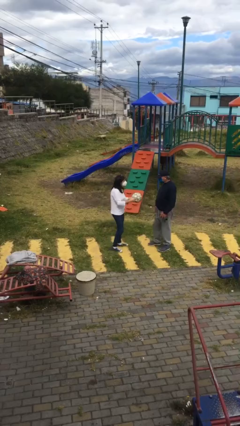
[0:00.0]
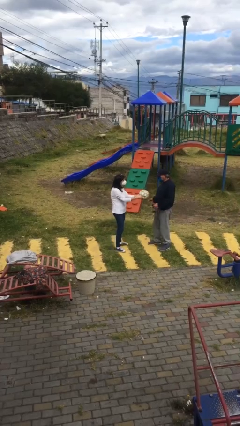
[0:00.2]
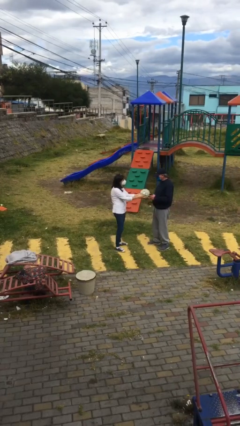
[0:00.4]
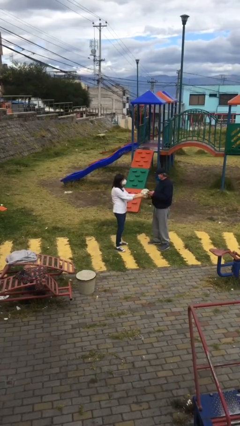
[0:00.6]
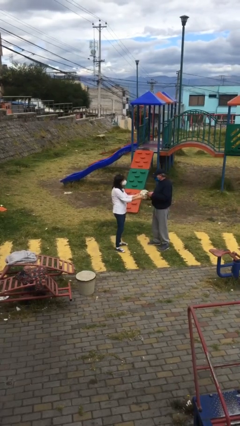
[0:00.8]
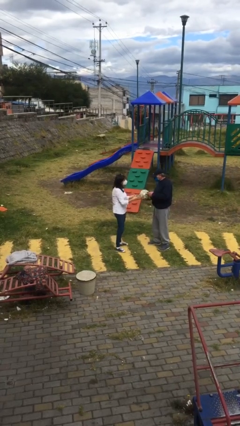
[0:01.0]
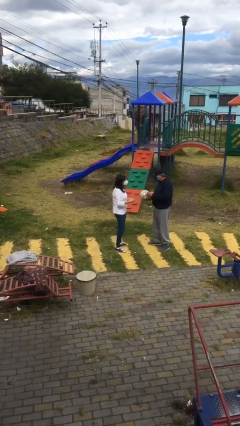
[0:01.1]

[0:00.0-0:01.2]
person transfers object to person

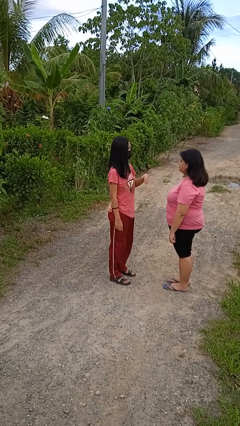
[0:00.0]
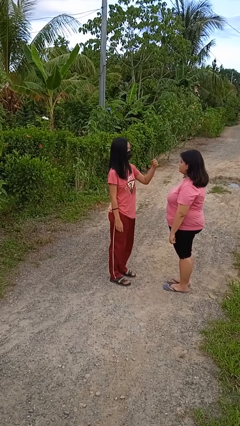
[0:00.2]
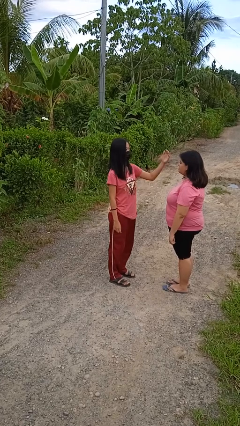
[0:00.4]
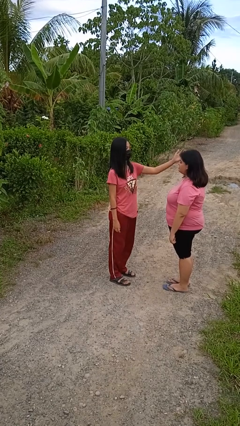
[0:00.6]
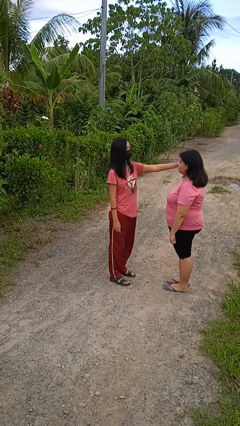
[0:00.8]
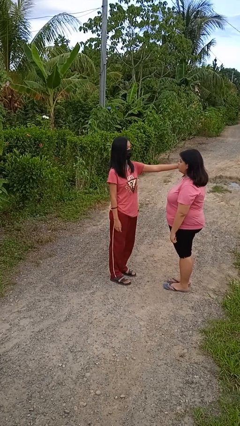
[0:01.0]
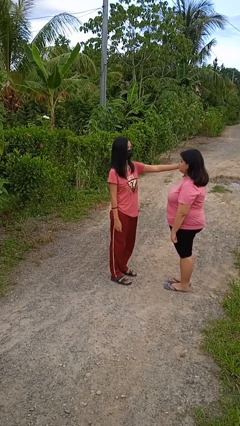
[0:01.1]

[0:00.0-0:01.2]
person touches face of person

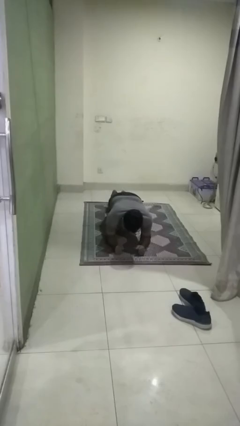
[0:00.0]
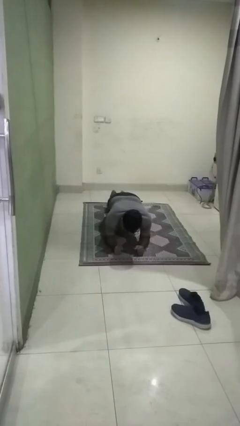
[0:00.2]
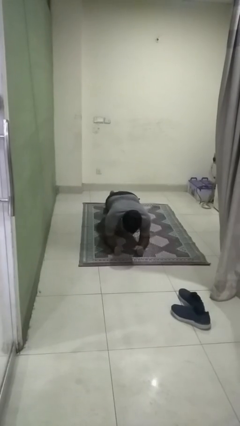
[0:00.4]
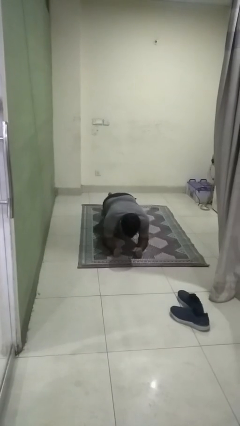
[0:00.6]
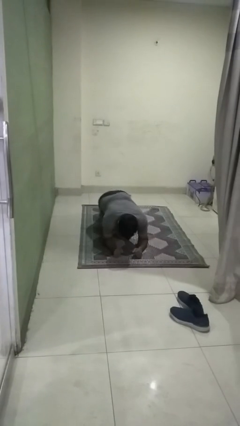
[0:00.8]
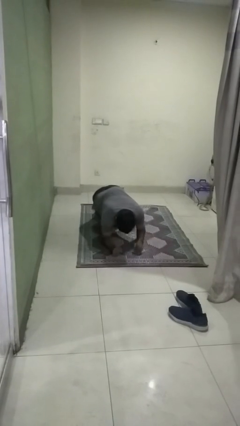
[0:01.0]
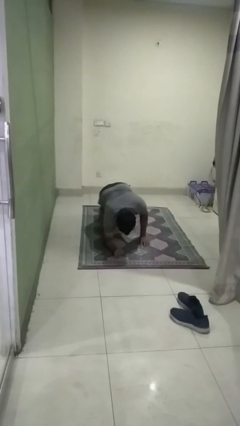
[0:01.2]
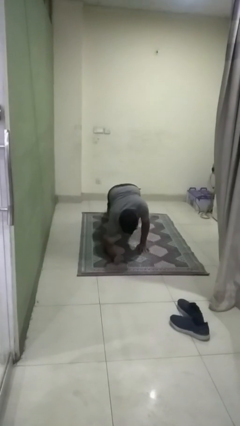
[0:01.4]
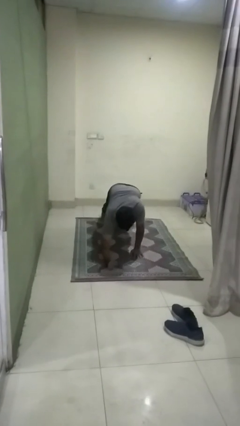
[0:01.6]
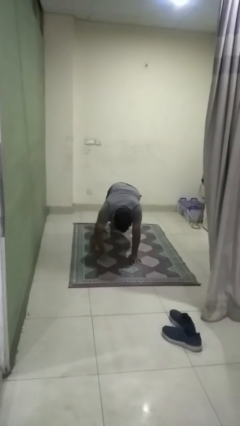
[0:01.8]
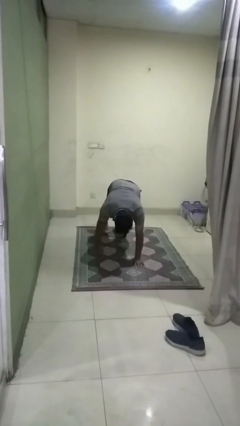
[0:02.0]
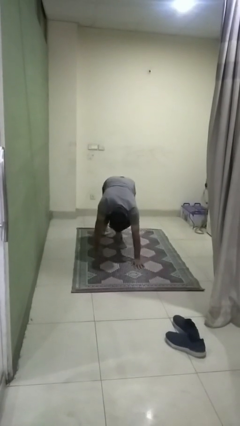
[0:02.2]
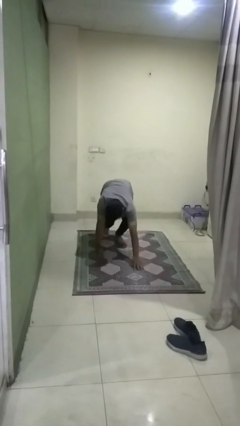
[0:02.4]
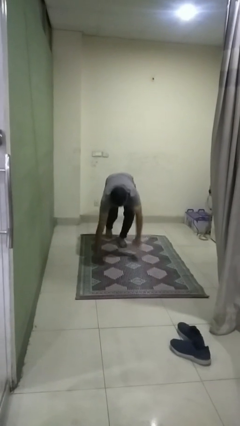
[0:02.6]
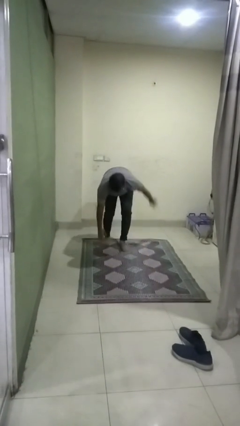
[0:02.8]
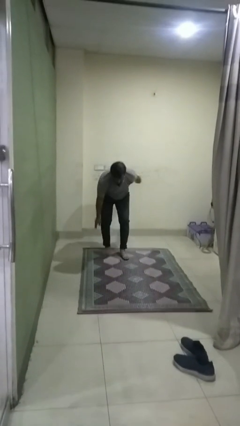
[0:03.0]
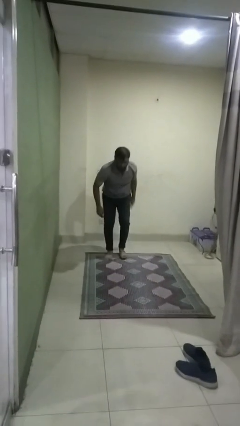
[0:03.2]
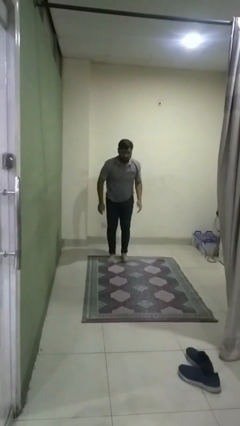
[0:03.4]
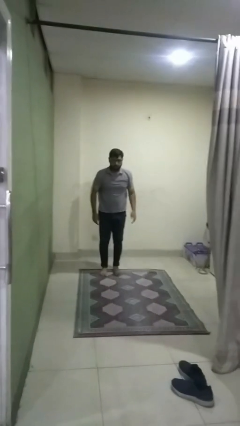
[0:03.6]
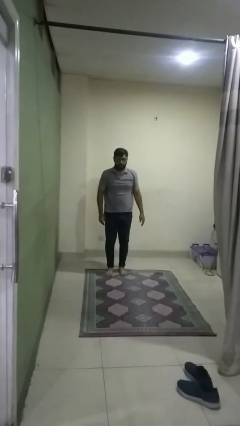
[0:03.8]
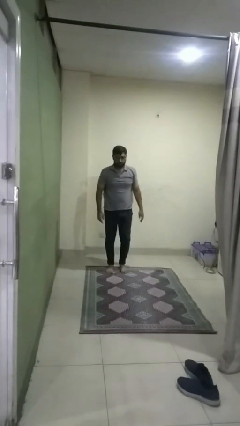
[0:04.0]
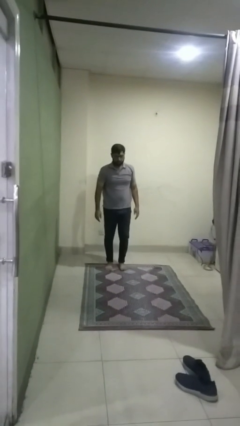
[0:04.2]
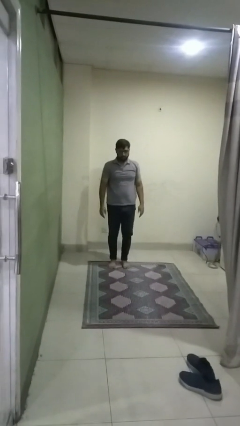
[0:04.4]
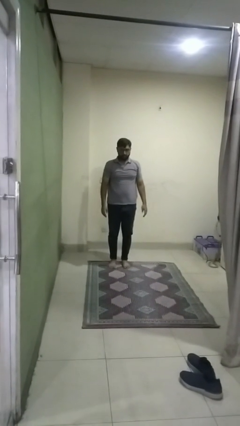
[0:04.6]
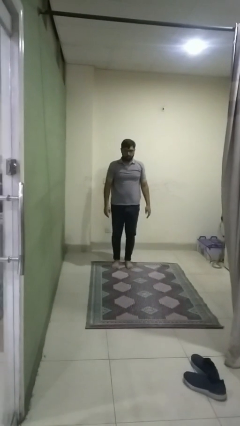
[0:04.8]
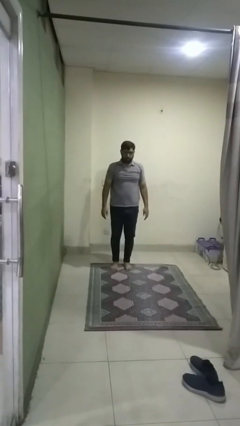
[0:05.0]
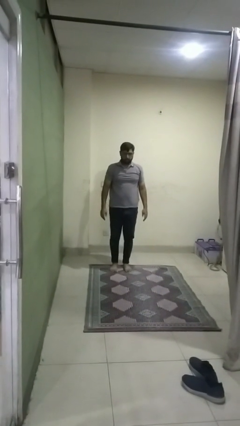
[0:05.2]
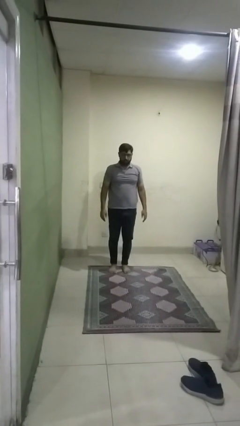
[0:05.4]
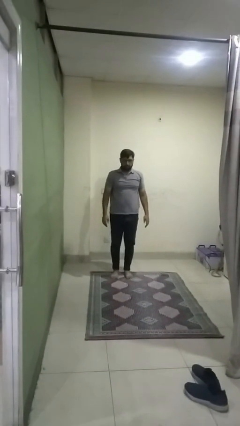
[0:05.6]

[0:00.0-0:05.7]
person stands up from floor

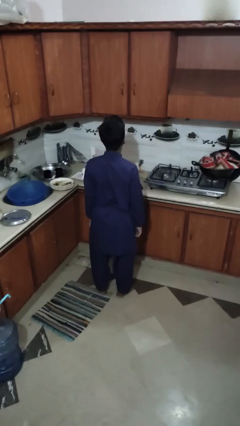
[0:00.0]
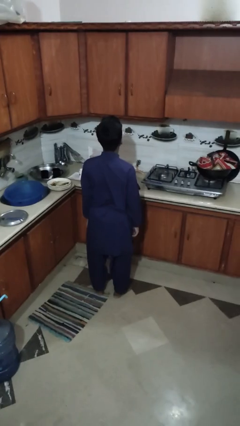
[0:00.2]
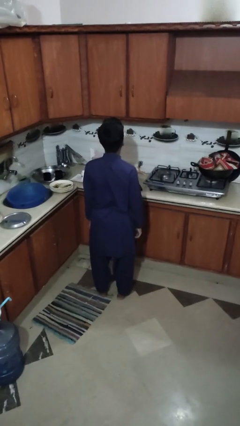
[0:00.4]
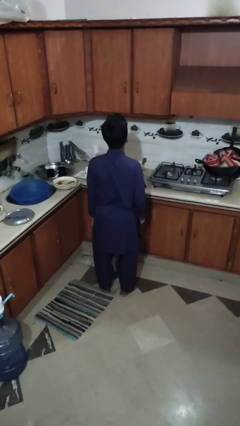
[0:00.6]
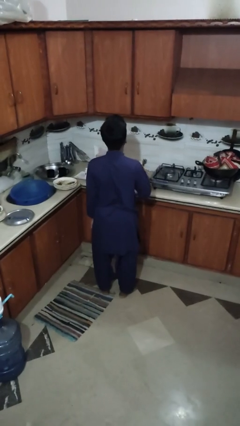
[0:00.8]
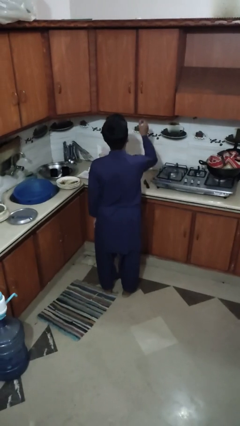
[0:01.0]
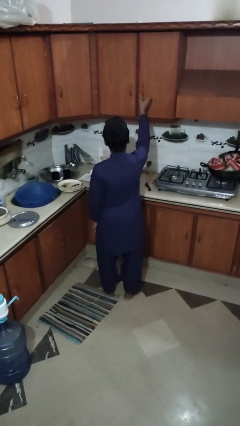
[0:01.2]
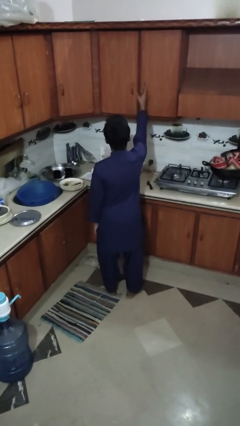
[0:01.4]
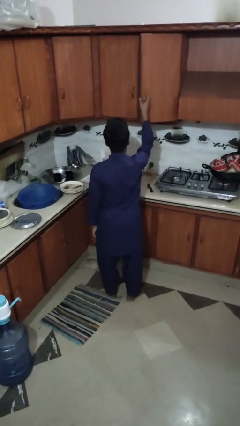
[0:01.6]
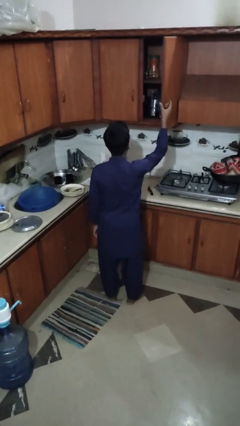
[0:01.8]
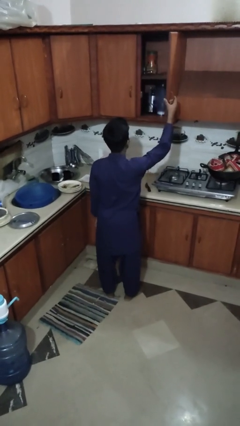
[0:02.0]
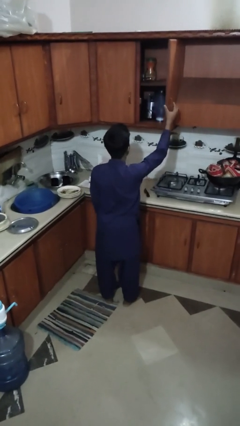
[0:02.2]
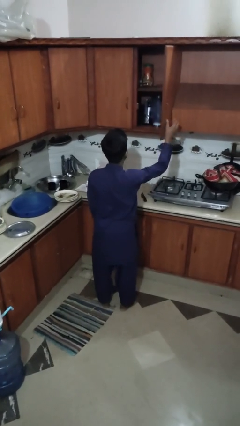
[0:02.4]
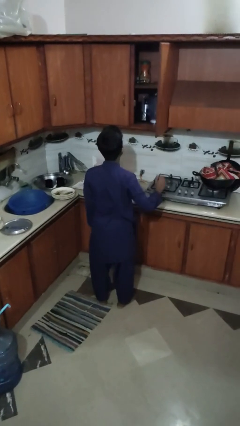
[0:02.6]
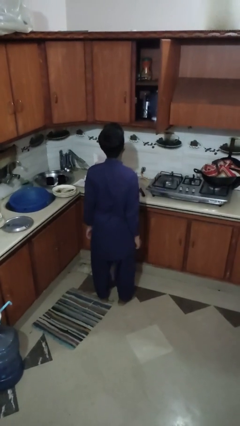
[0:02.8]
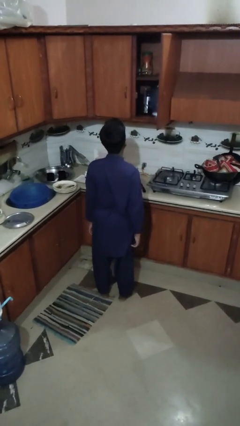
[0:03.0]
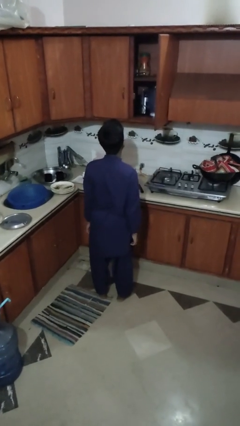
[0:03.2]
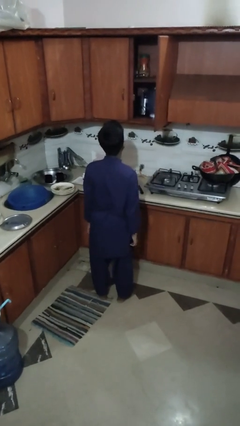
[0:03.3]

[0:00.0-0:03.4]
person opens cabinet

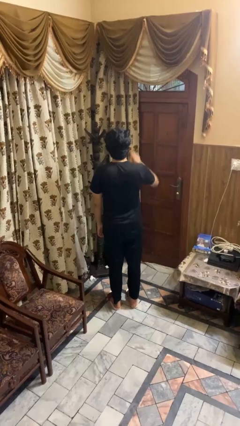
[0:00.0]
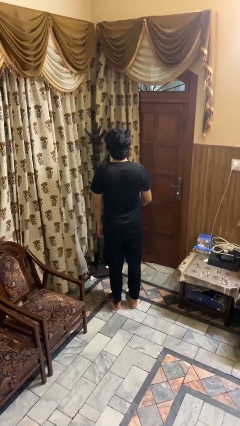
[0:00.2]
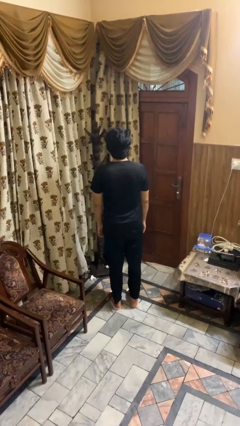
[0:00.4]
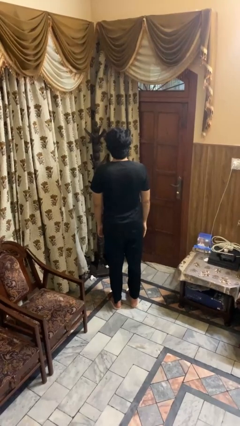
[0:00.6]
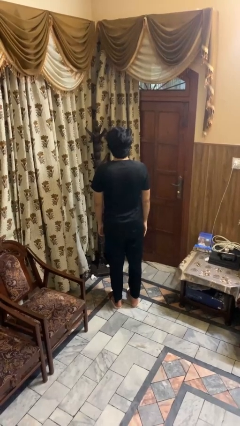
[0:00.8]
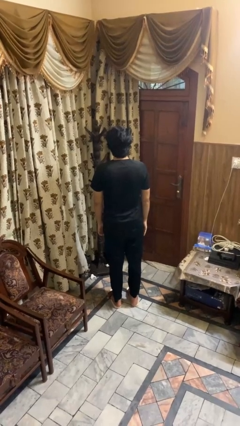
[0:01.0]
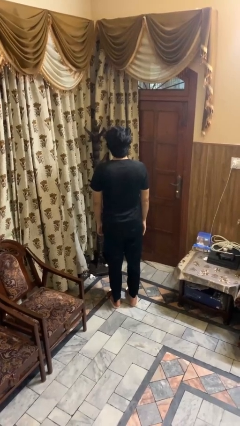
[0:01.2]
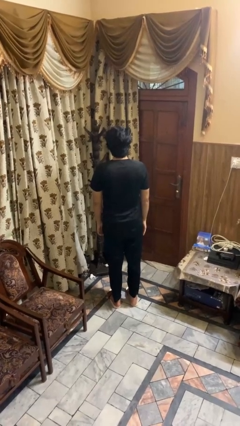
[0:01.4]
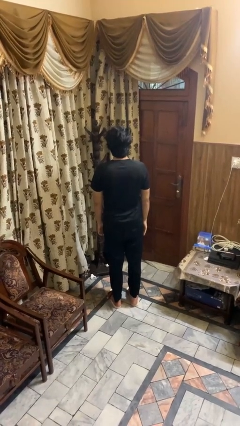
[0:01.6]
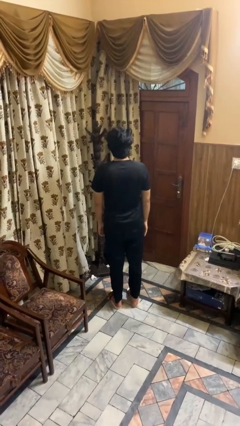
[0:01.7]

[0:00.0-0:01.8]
person gestures lower hand

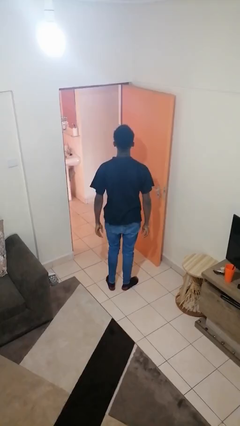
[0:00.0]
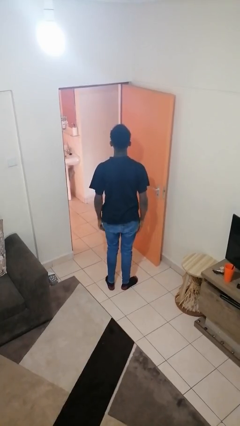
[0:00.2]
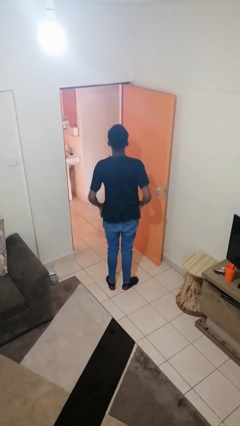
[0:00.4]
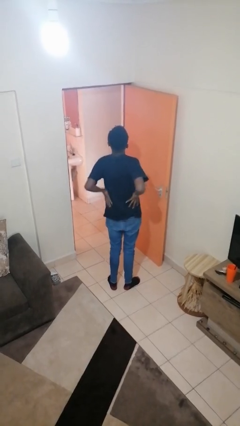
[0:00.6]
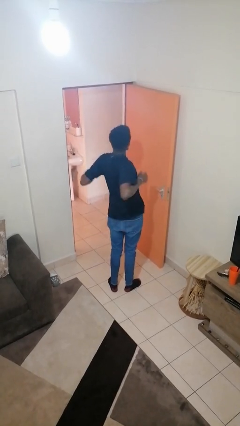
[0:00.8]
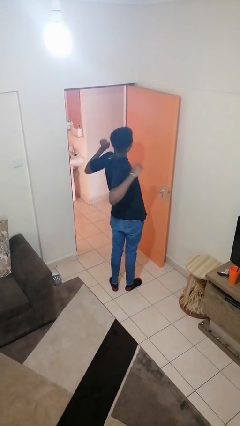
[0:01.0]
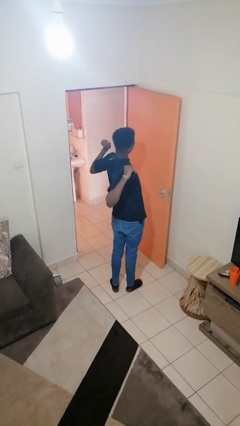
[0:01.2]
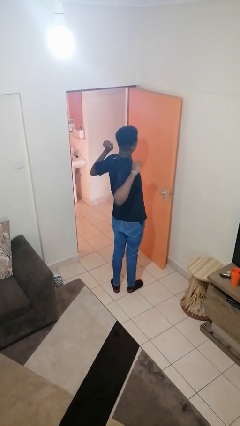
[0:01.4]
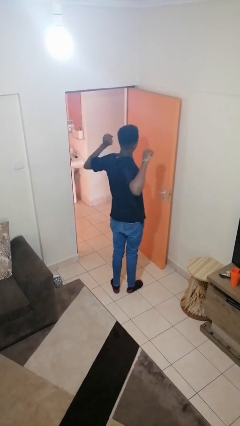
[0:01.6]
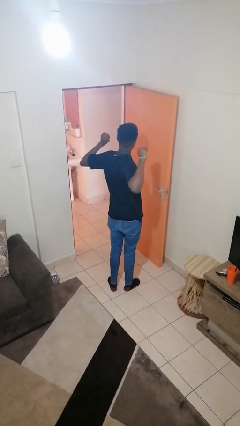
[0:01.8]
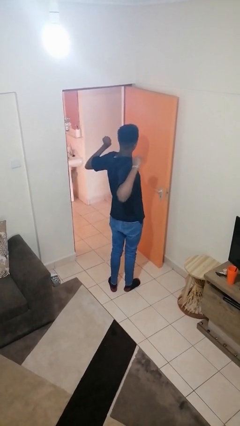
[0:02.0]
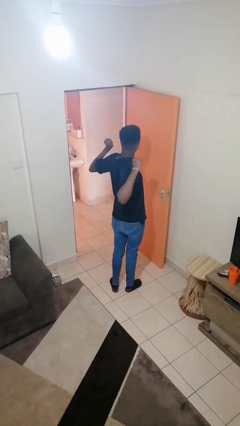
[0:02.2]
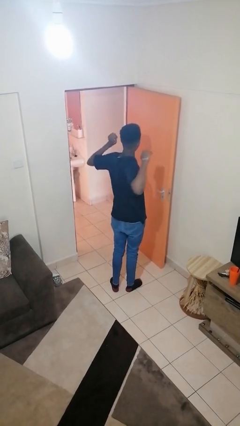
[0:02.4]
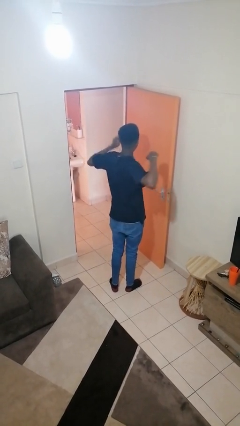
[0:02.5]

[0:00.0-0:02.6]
person stretches arms to side

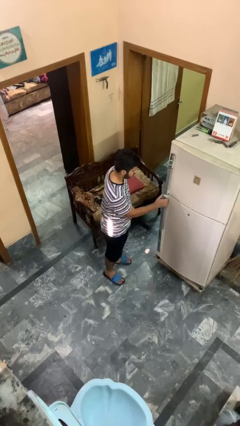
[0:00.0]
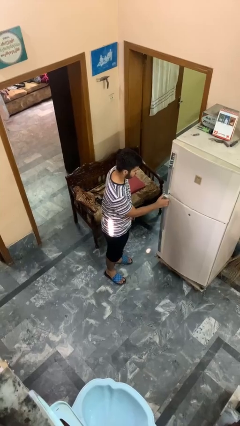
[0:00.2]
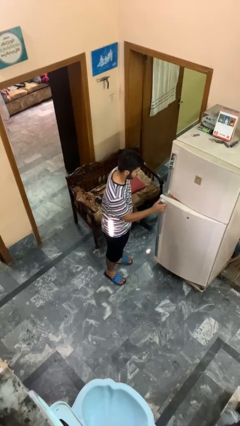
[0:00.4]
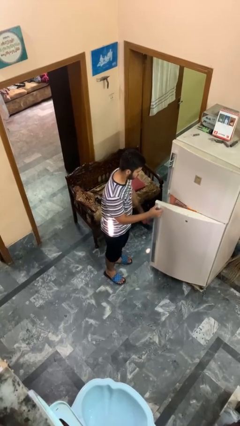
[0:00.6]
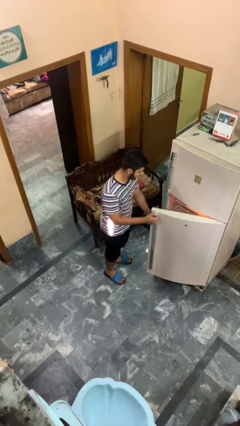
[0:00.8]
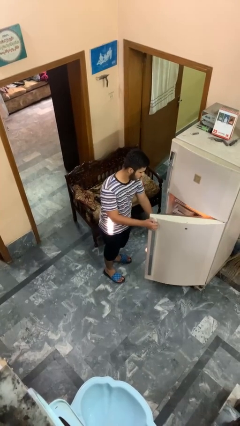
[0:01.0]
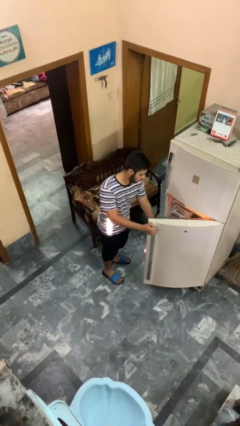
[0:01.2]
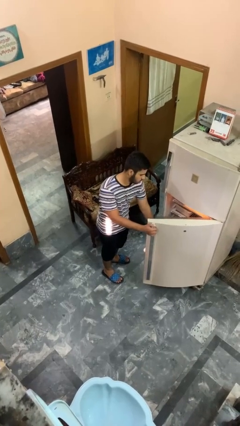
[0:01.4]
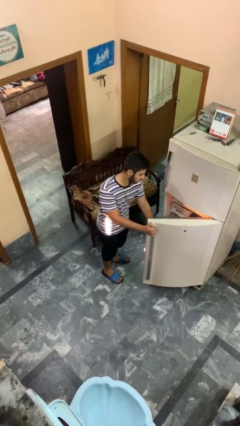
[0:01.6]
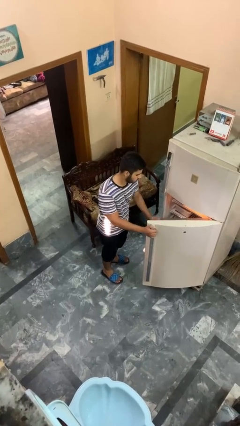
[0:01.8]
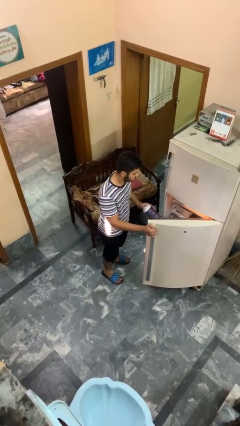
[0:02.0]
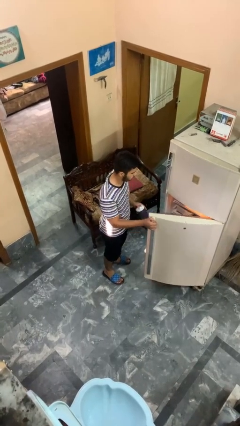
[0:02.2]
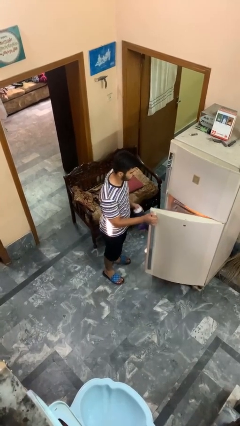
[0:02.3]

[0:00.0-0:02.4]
person takes object from refrigerator
